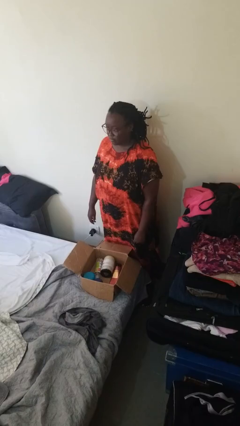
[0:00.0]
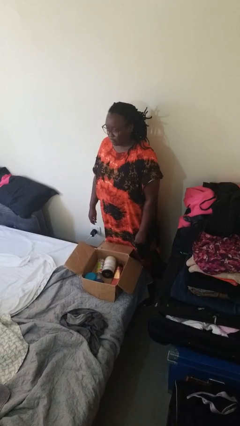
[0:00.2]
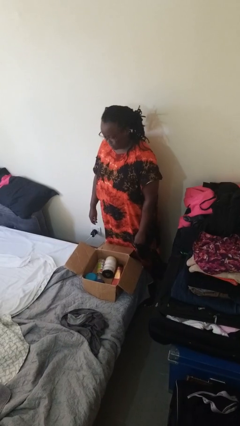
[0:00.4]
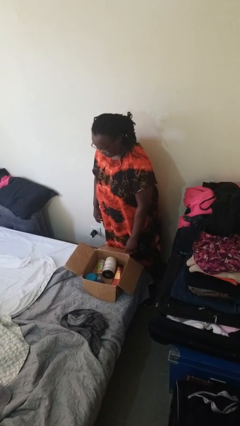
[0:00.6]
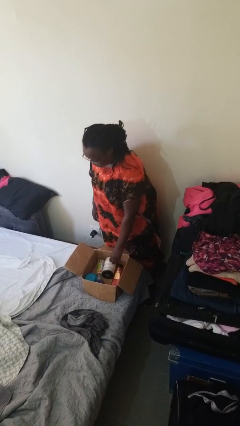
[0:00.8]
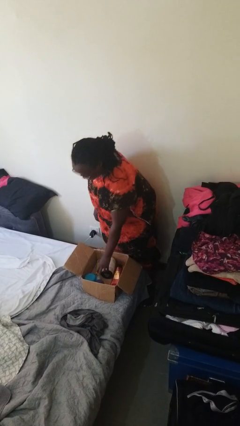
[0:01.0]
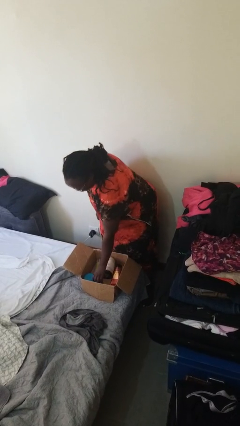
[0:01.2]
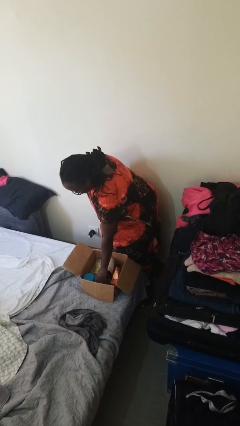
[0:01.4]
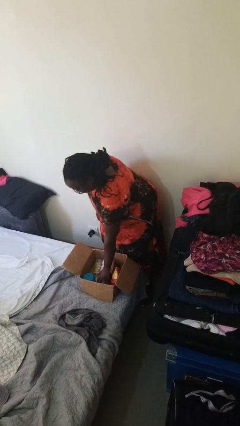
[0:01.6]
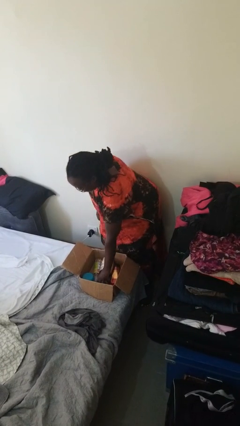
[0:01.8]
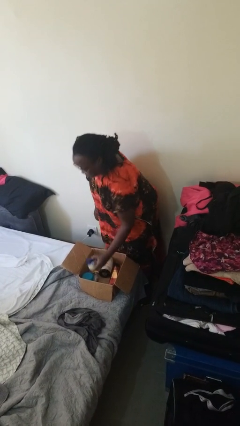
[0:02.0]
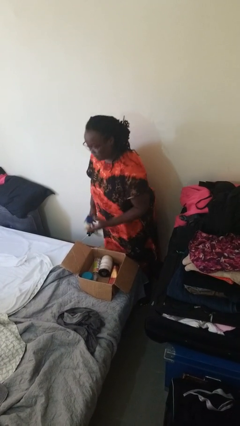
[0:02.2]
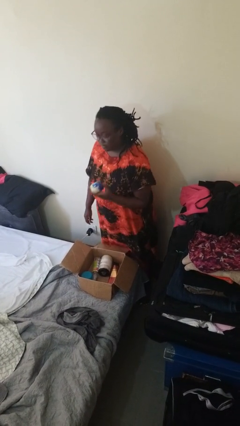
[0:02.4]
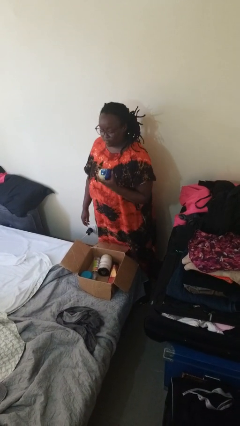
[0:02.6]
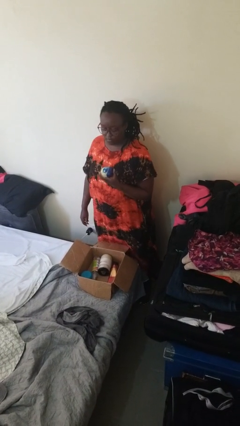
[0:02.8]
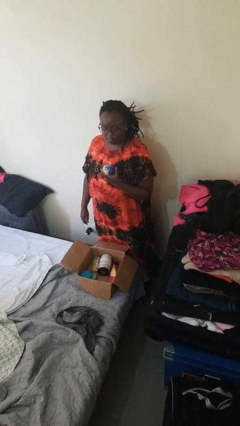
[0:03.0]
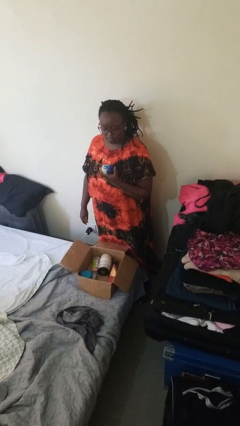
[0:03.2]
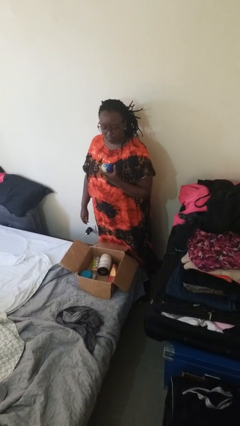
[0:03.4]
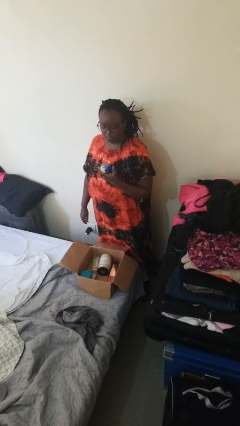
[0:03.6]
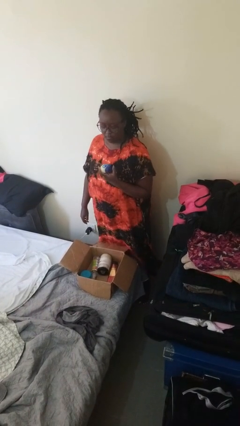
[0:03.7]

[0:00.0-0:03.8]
person takes object from box

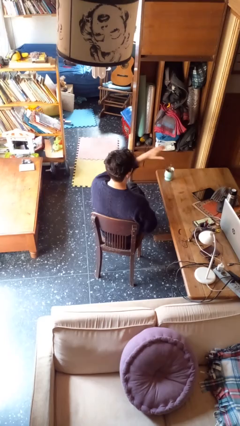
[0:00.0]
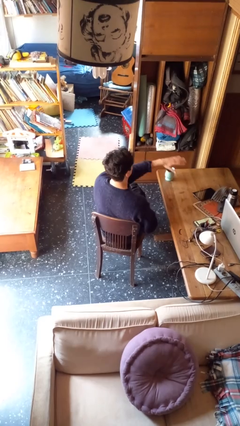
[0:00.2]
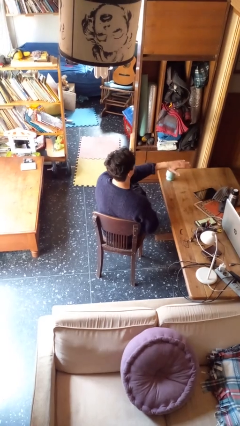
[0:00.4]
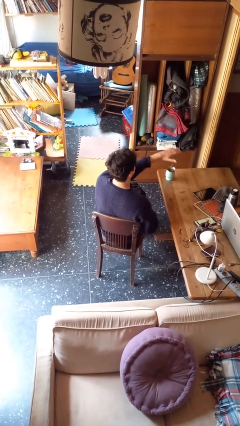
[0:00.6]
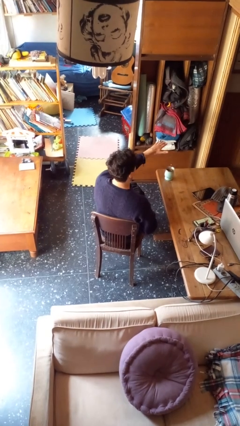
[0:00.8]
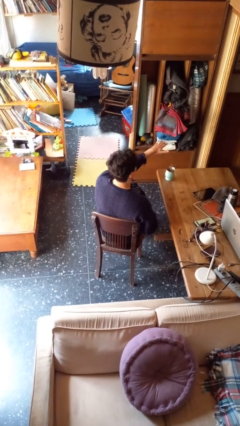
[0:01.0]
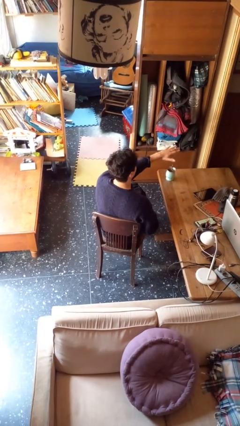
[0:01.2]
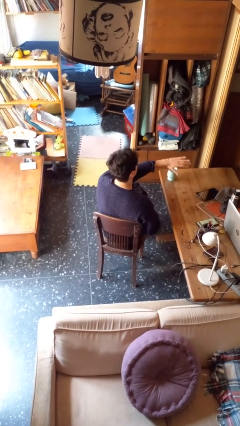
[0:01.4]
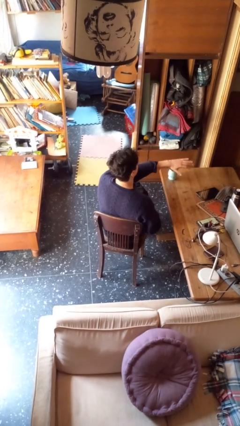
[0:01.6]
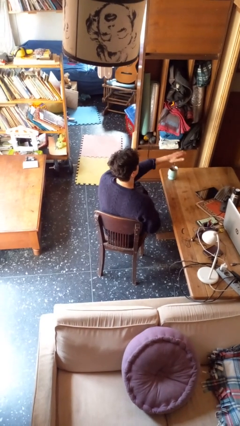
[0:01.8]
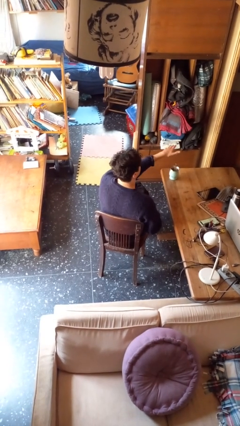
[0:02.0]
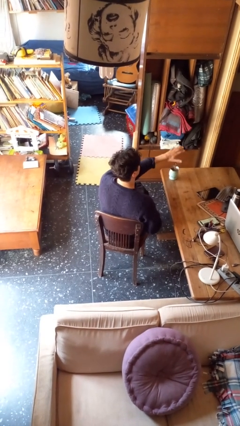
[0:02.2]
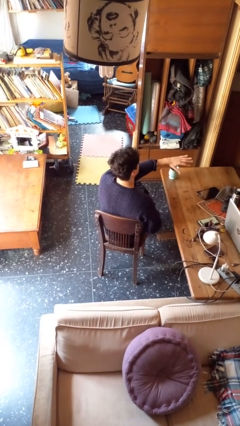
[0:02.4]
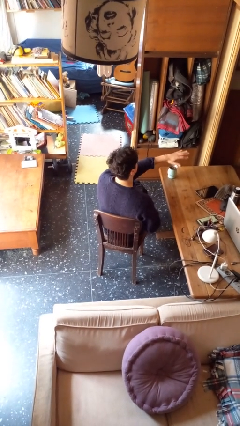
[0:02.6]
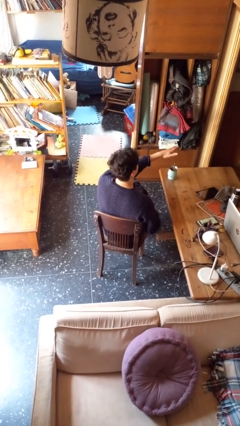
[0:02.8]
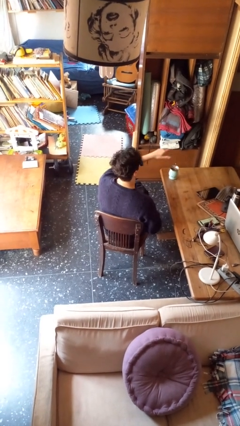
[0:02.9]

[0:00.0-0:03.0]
person waves hand over object

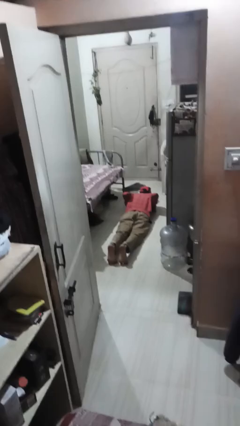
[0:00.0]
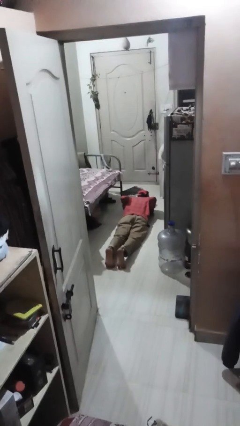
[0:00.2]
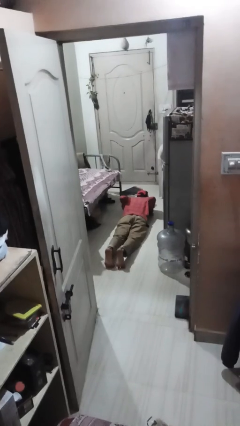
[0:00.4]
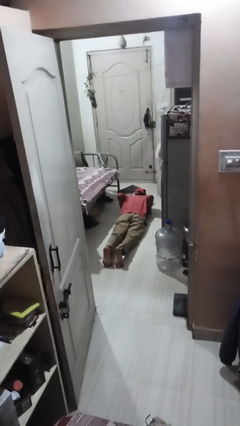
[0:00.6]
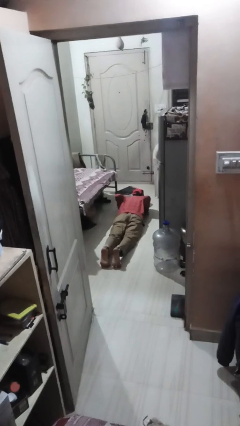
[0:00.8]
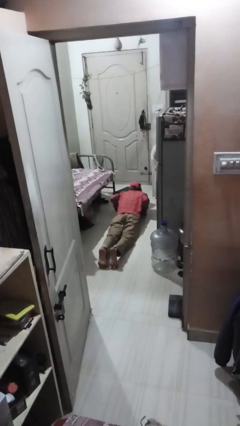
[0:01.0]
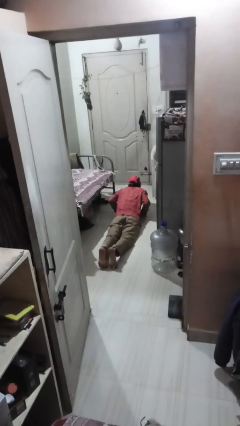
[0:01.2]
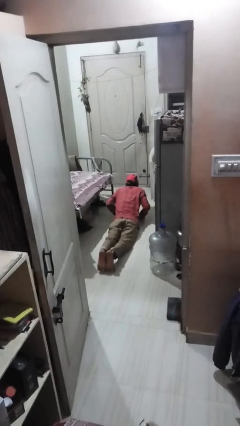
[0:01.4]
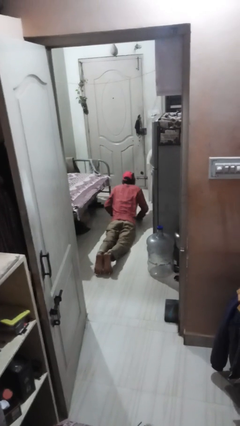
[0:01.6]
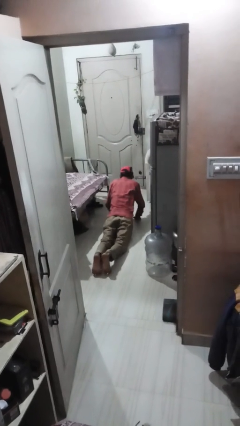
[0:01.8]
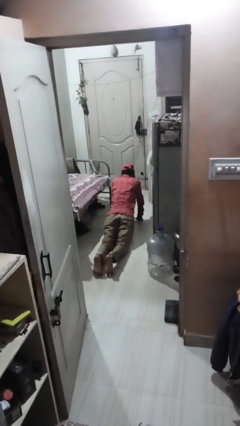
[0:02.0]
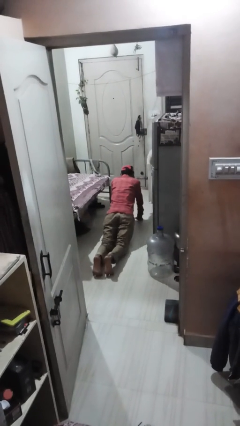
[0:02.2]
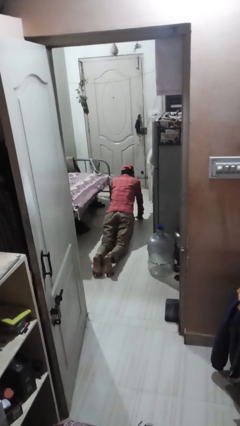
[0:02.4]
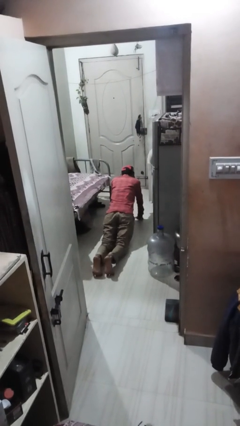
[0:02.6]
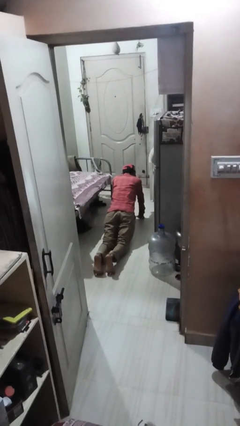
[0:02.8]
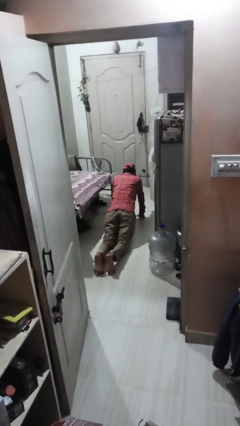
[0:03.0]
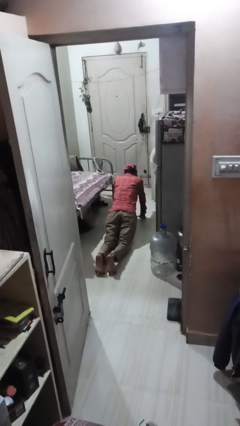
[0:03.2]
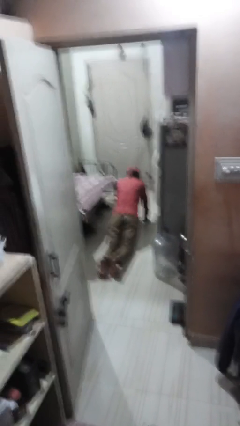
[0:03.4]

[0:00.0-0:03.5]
person exercises with pushup

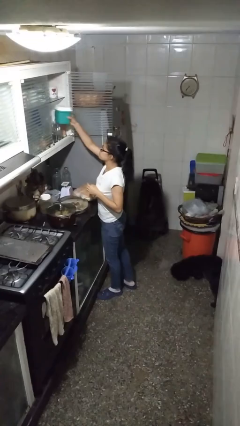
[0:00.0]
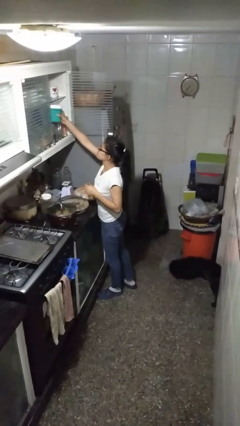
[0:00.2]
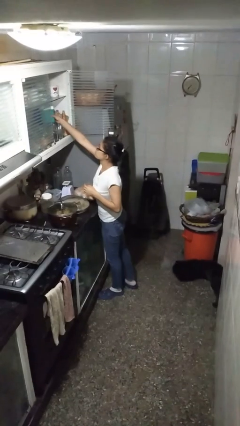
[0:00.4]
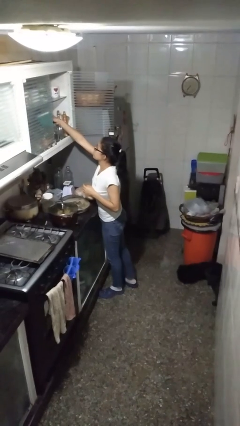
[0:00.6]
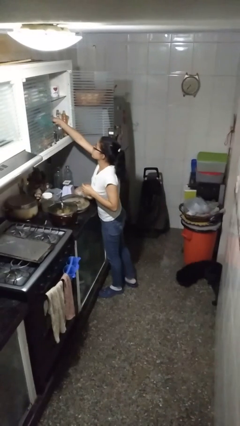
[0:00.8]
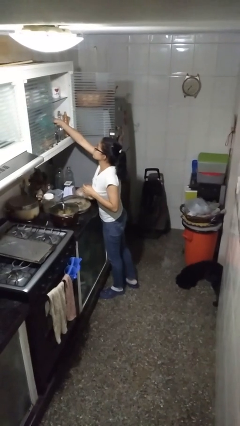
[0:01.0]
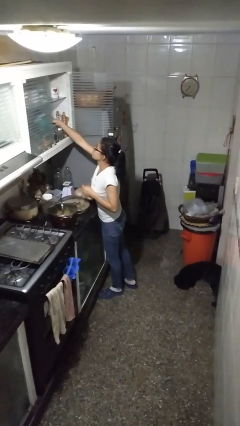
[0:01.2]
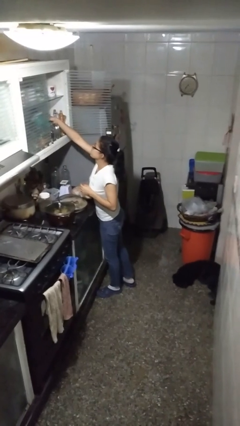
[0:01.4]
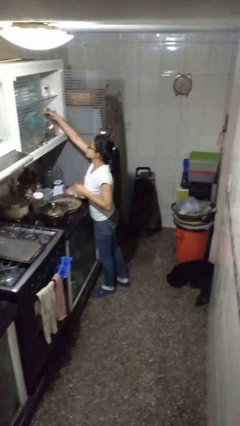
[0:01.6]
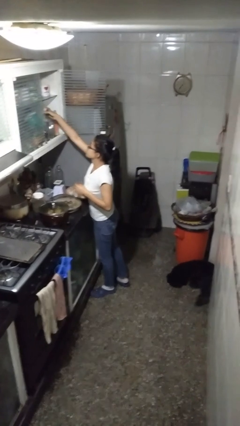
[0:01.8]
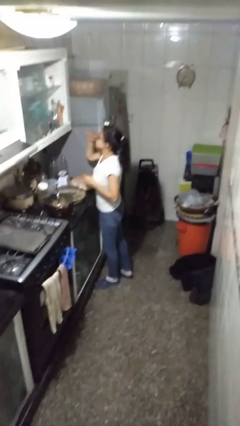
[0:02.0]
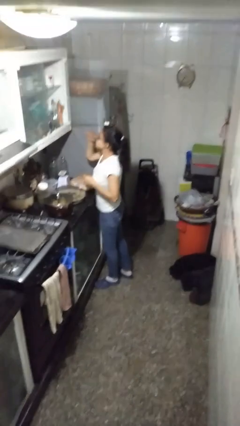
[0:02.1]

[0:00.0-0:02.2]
person puts down object into cabinet

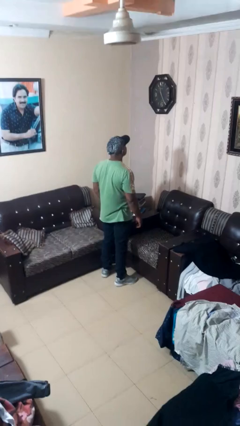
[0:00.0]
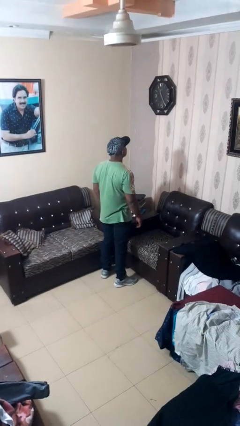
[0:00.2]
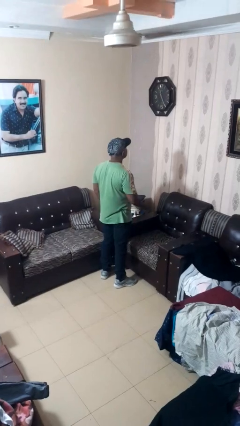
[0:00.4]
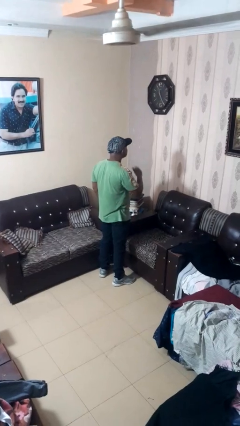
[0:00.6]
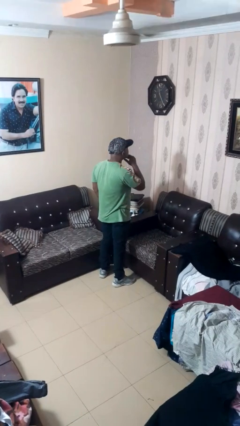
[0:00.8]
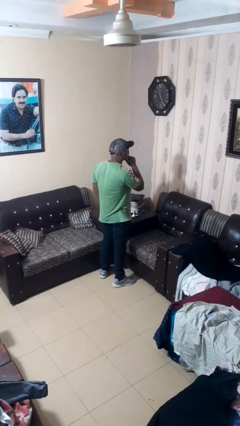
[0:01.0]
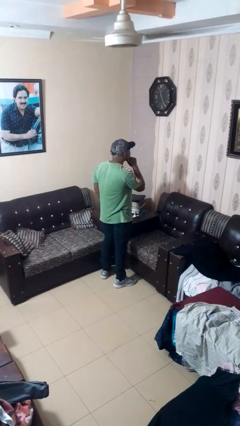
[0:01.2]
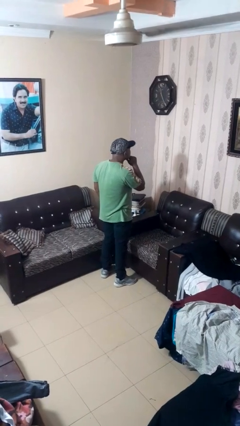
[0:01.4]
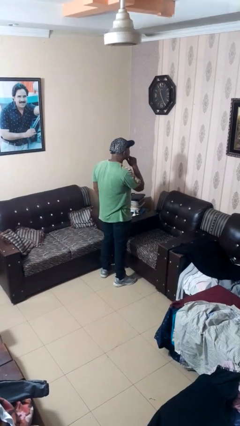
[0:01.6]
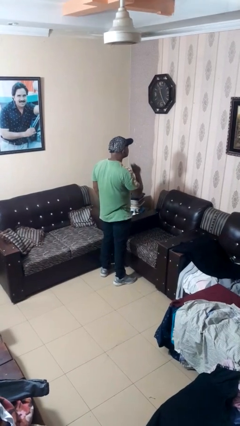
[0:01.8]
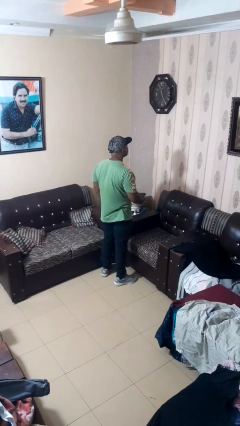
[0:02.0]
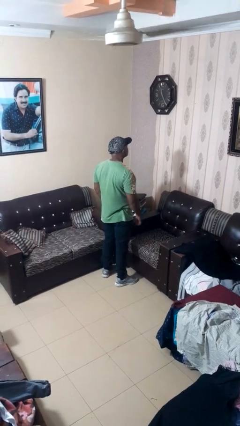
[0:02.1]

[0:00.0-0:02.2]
person strokes chin

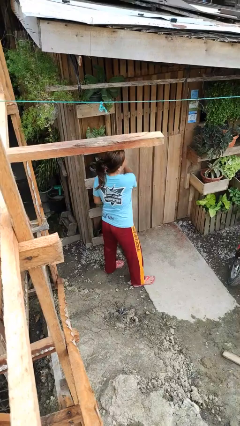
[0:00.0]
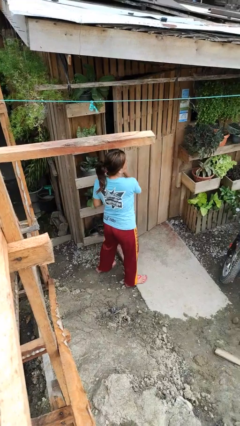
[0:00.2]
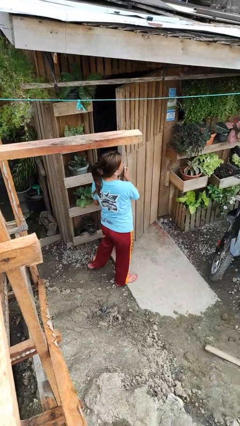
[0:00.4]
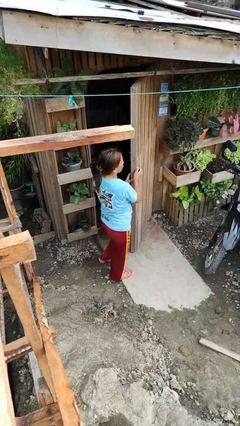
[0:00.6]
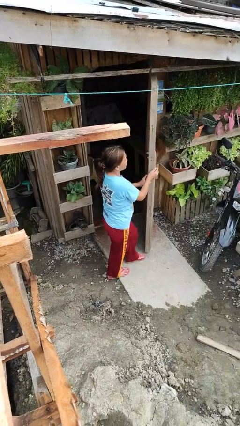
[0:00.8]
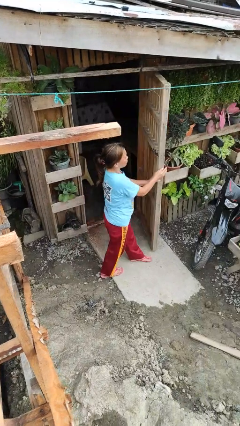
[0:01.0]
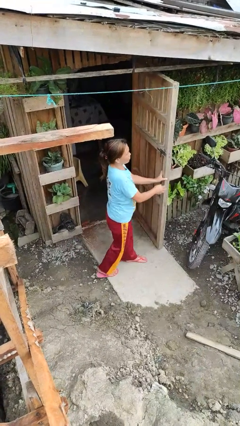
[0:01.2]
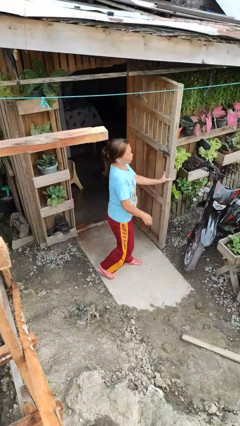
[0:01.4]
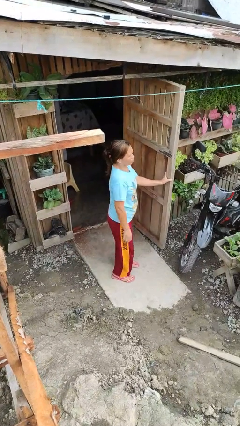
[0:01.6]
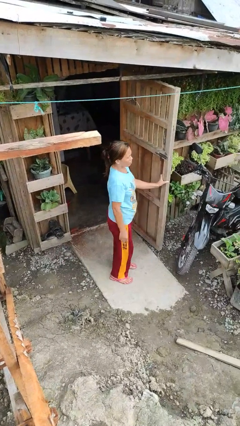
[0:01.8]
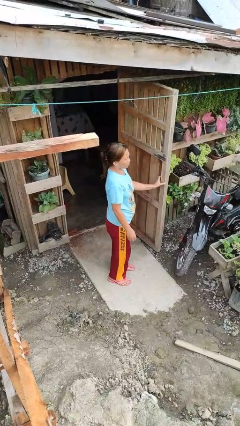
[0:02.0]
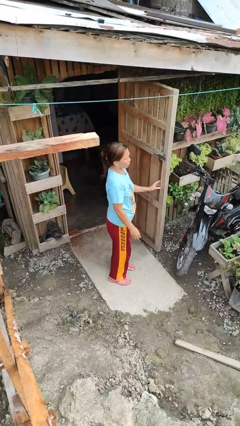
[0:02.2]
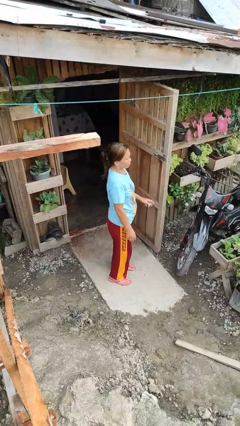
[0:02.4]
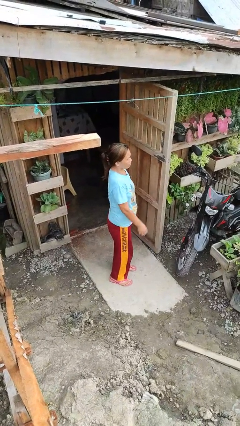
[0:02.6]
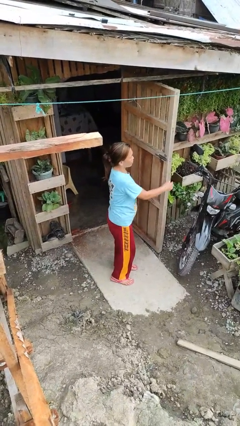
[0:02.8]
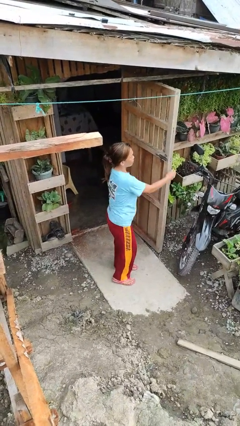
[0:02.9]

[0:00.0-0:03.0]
person opens facility door
